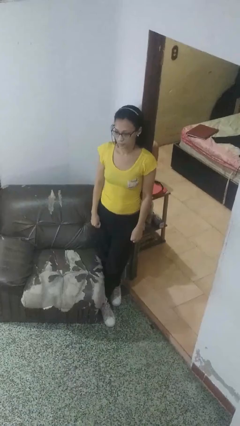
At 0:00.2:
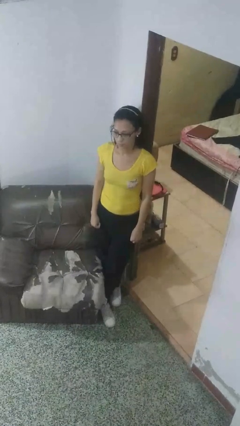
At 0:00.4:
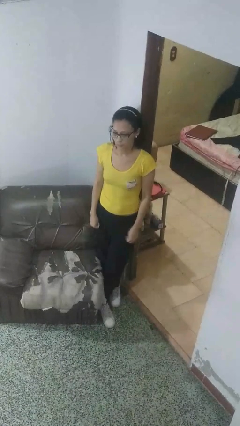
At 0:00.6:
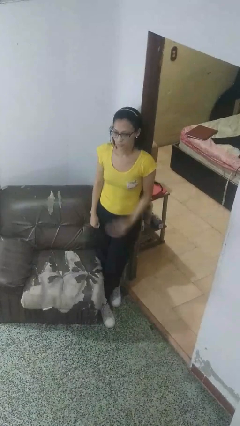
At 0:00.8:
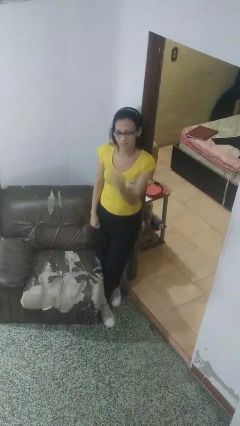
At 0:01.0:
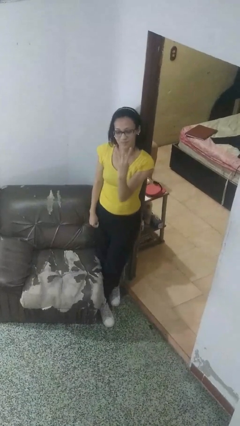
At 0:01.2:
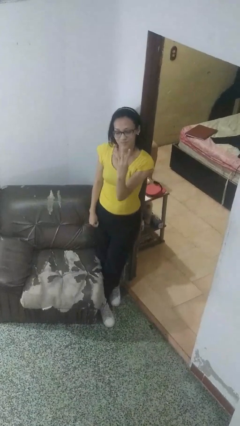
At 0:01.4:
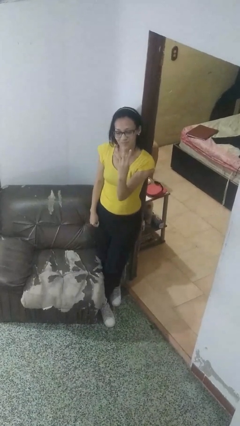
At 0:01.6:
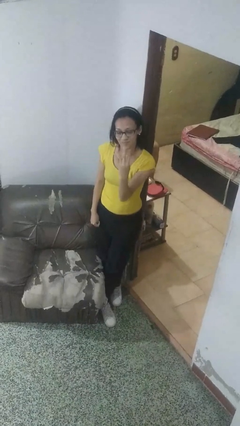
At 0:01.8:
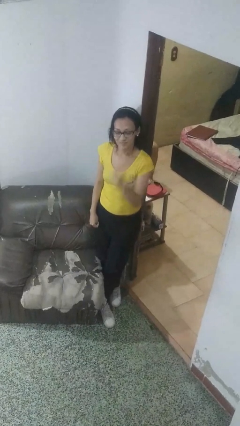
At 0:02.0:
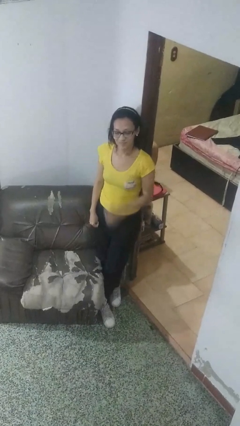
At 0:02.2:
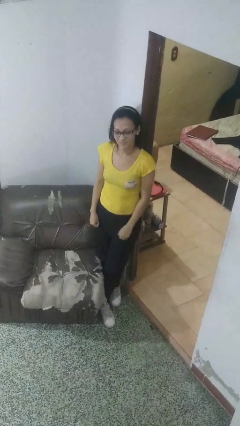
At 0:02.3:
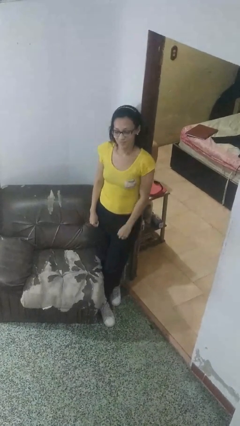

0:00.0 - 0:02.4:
person gestures number four

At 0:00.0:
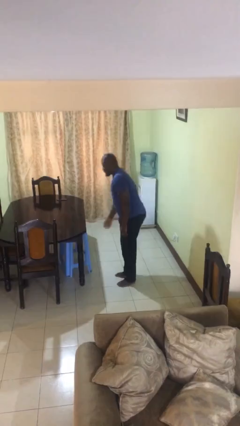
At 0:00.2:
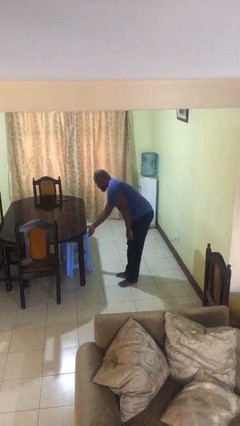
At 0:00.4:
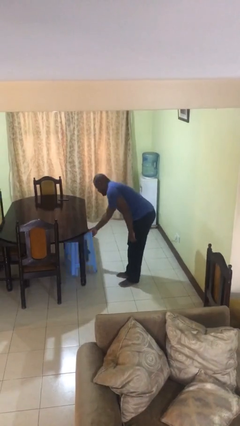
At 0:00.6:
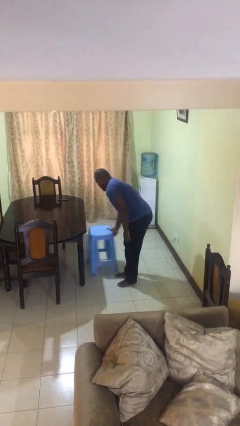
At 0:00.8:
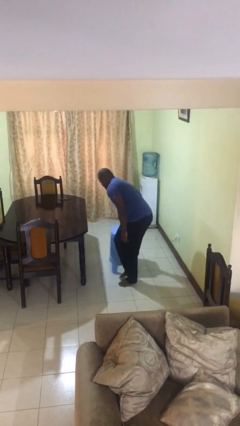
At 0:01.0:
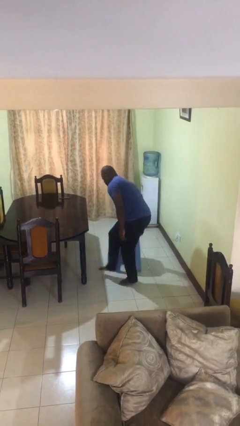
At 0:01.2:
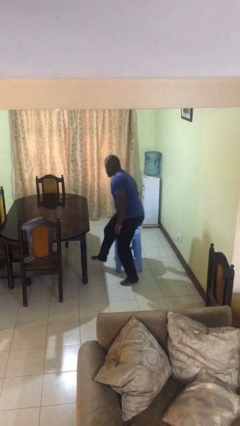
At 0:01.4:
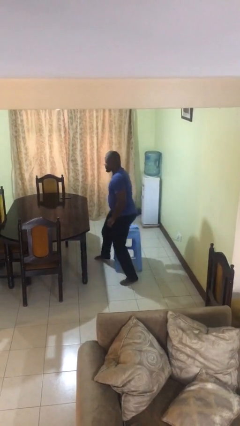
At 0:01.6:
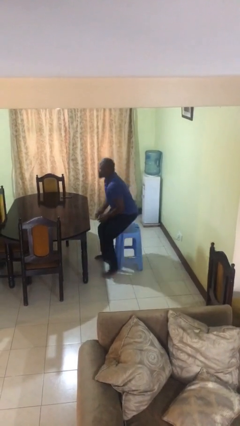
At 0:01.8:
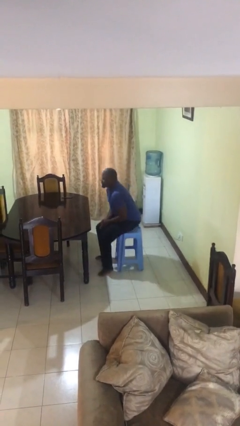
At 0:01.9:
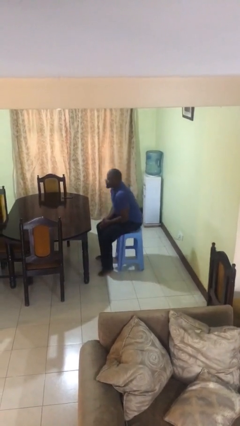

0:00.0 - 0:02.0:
person sits down

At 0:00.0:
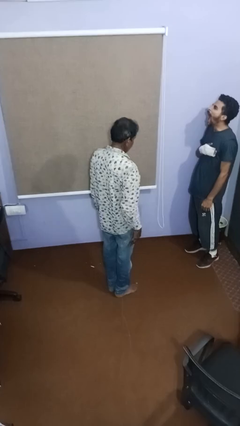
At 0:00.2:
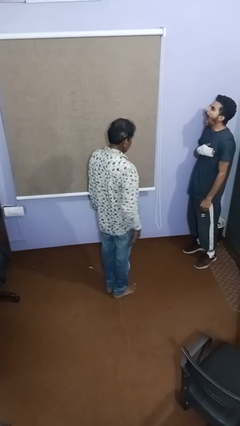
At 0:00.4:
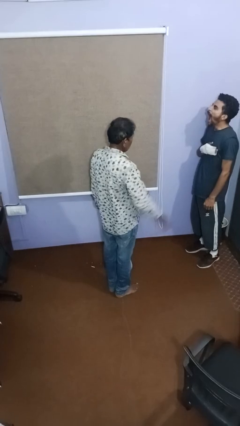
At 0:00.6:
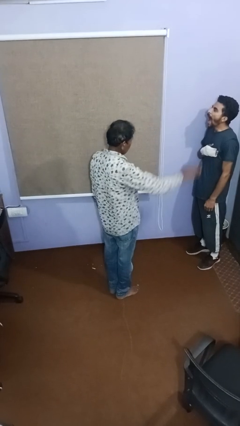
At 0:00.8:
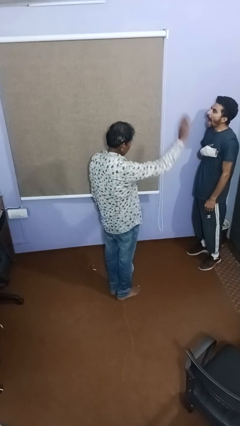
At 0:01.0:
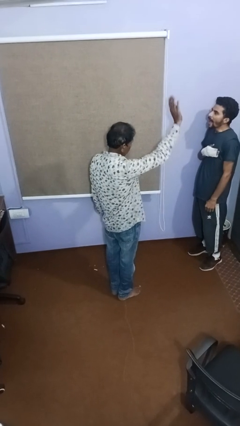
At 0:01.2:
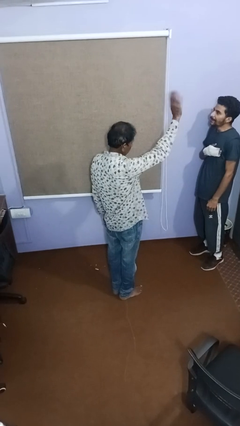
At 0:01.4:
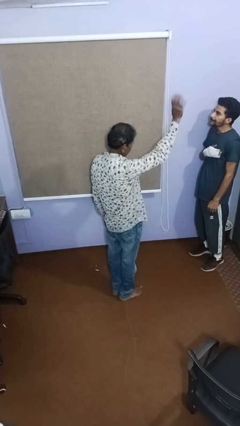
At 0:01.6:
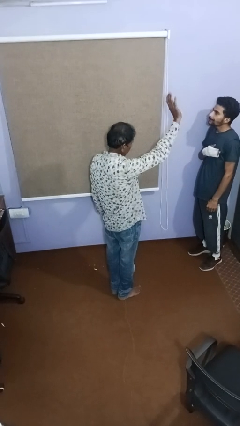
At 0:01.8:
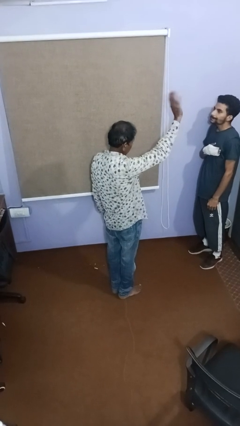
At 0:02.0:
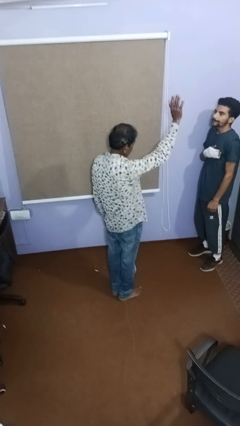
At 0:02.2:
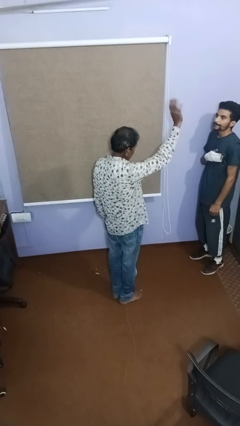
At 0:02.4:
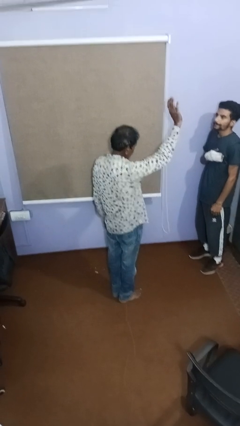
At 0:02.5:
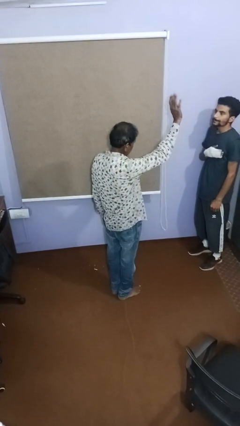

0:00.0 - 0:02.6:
person waves at person

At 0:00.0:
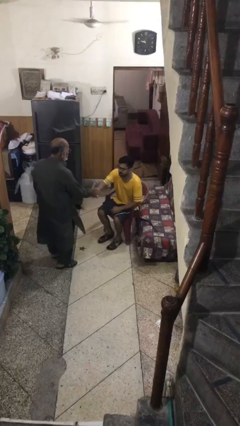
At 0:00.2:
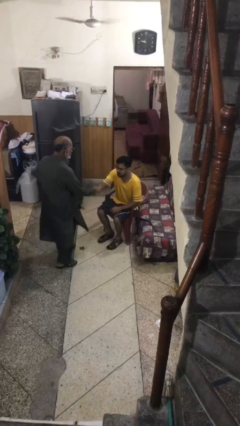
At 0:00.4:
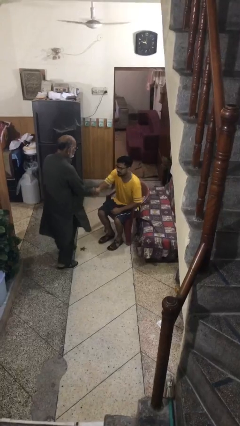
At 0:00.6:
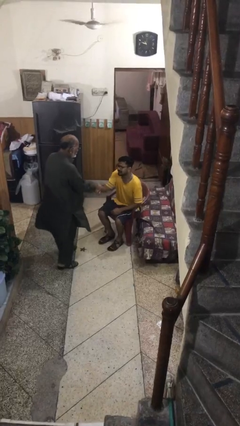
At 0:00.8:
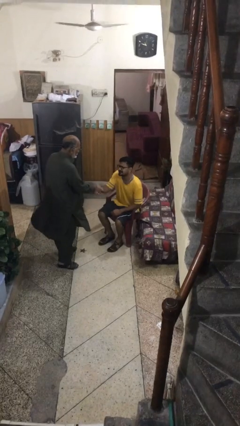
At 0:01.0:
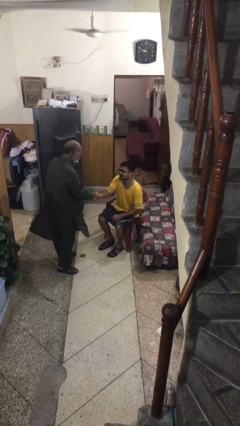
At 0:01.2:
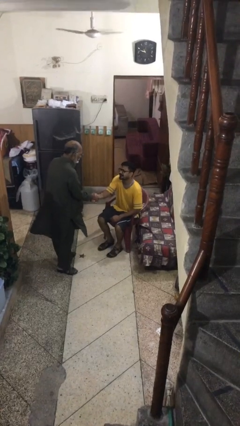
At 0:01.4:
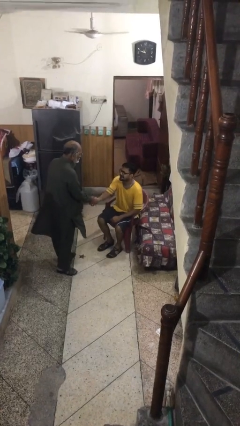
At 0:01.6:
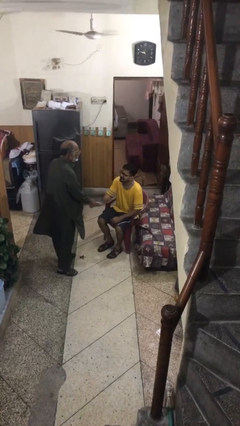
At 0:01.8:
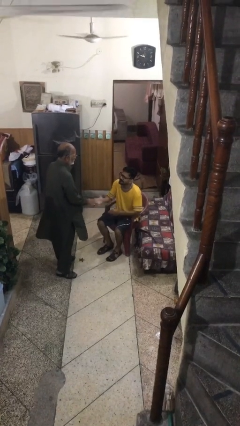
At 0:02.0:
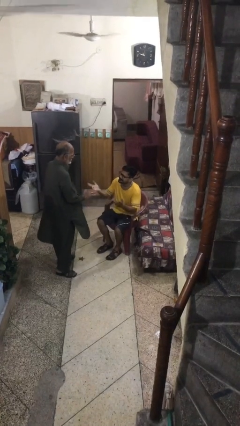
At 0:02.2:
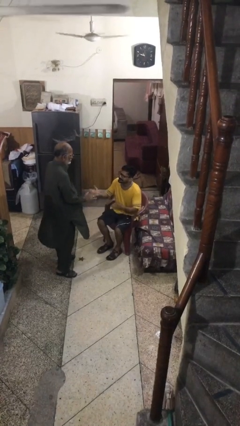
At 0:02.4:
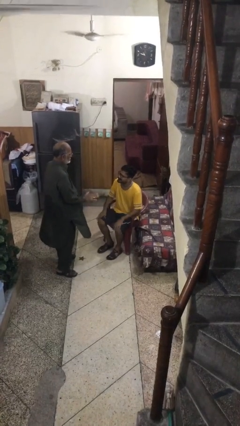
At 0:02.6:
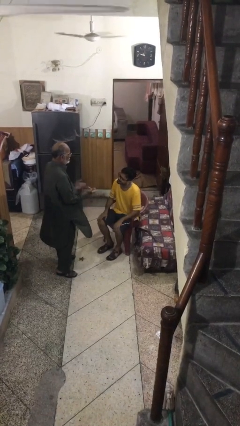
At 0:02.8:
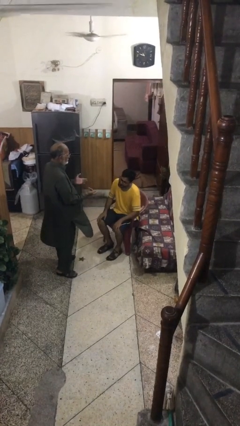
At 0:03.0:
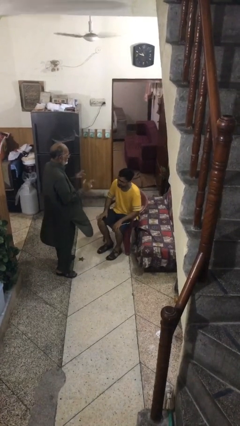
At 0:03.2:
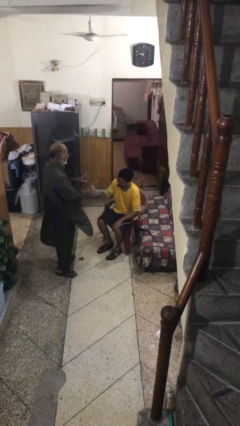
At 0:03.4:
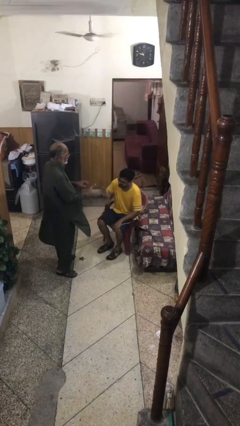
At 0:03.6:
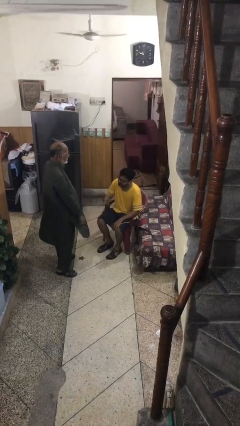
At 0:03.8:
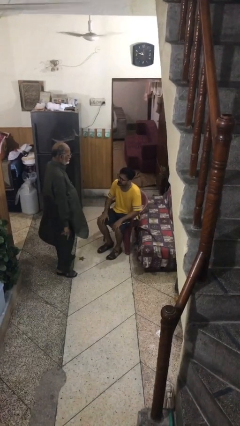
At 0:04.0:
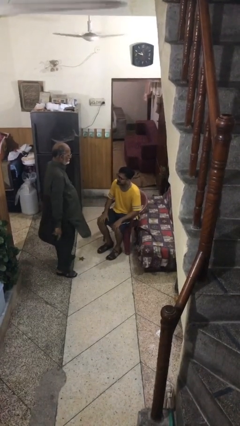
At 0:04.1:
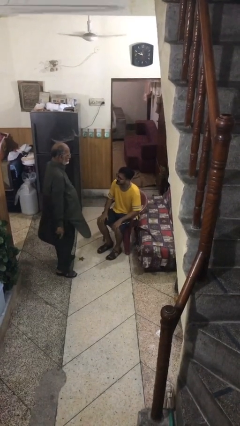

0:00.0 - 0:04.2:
person shakes hand

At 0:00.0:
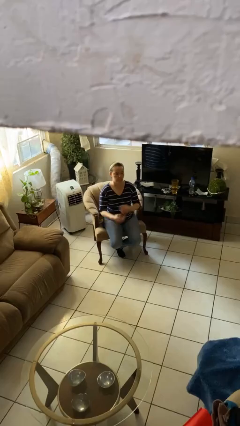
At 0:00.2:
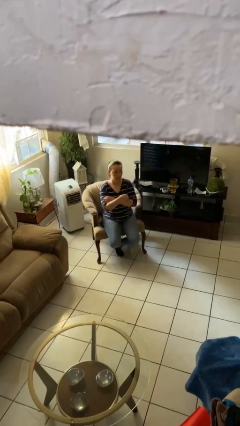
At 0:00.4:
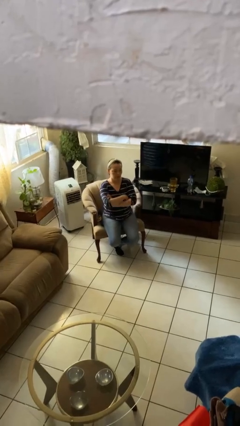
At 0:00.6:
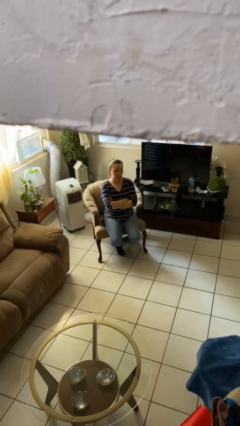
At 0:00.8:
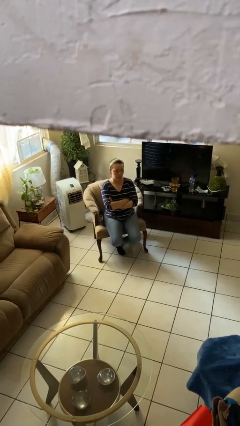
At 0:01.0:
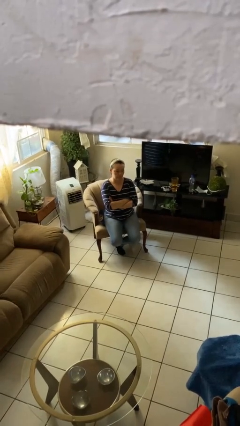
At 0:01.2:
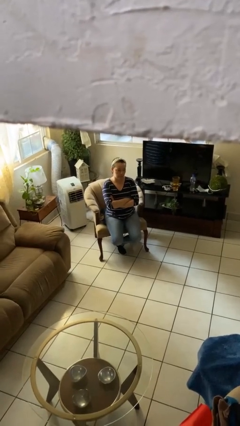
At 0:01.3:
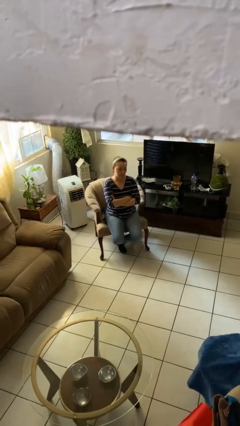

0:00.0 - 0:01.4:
person crosses arms

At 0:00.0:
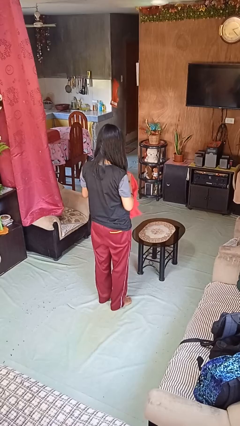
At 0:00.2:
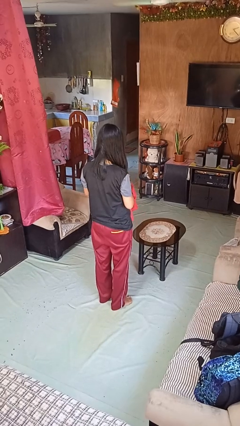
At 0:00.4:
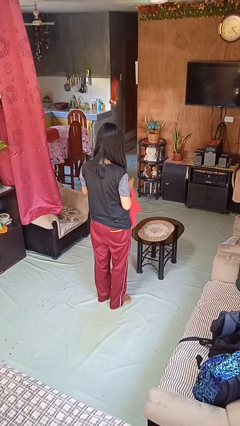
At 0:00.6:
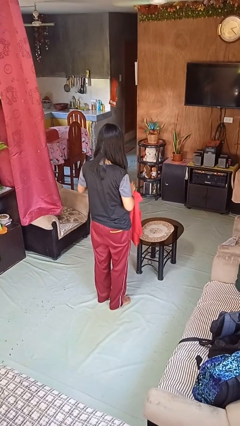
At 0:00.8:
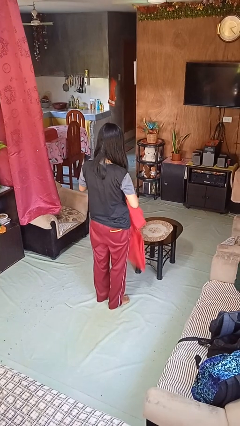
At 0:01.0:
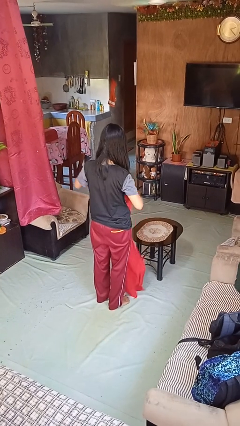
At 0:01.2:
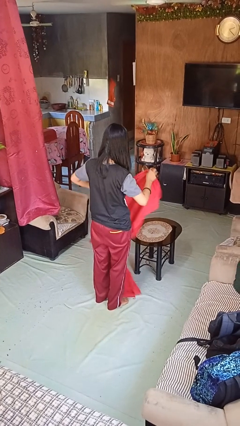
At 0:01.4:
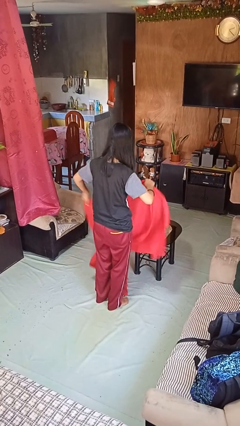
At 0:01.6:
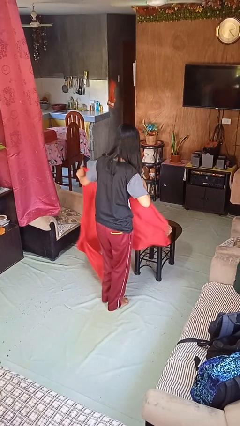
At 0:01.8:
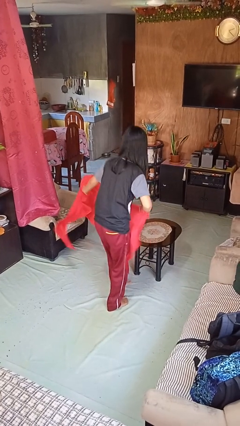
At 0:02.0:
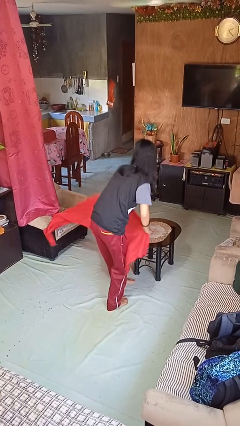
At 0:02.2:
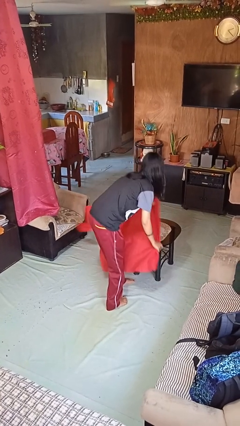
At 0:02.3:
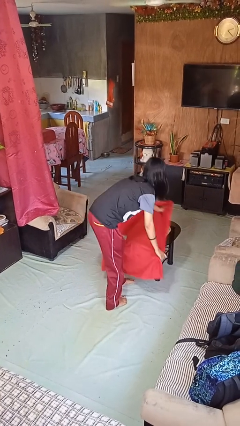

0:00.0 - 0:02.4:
person spreads tablecloth

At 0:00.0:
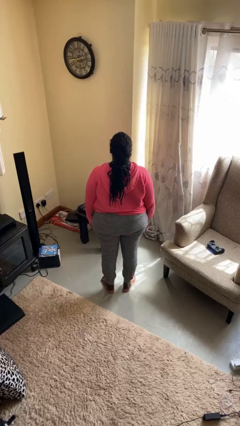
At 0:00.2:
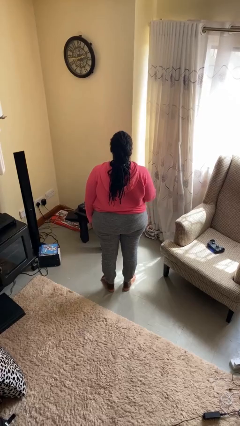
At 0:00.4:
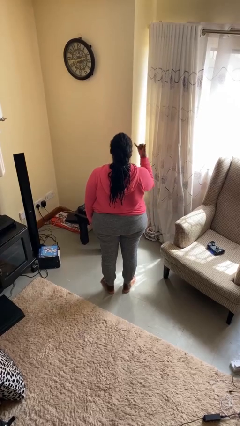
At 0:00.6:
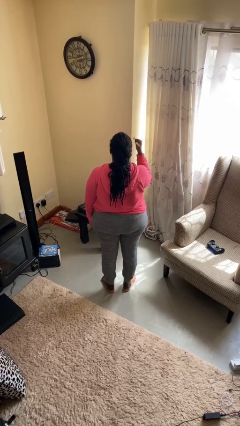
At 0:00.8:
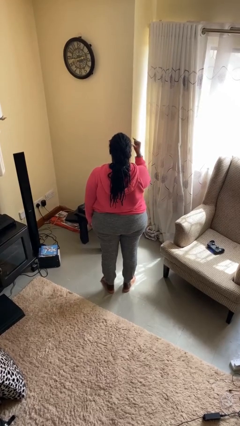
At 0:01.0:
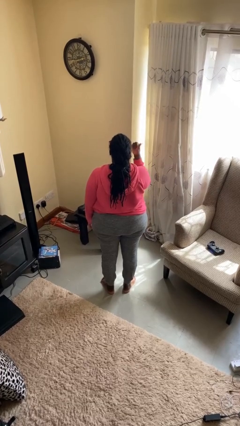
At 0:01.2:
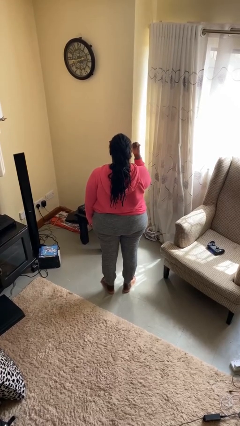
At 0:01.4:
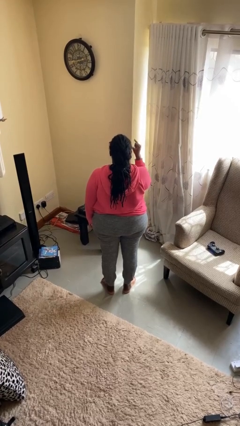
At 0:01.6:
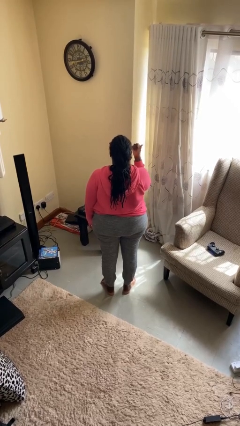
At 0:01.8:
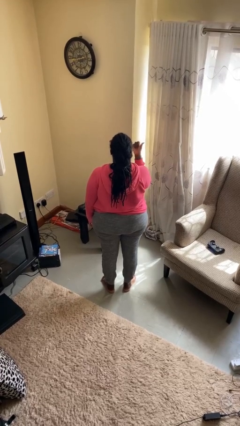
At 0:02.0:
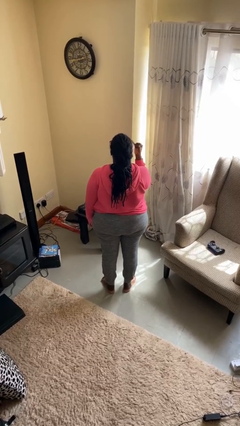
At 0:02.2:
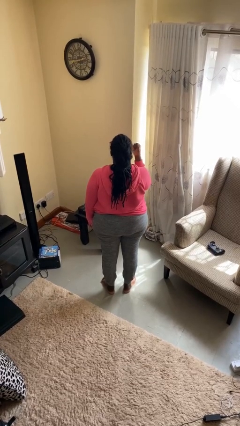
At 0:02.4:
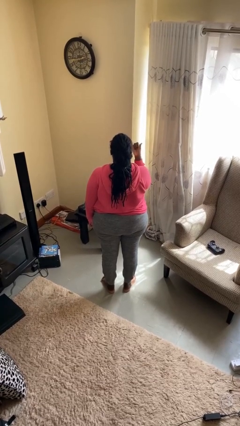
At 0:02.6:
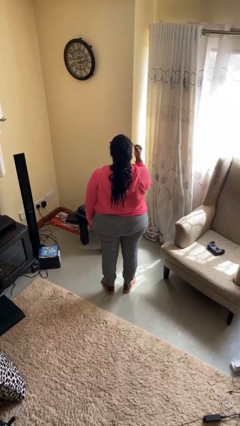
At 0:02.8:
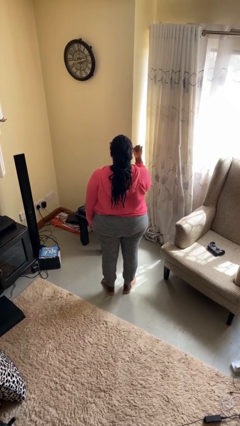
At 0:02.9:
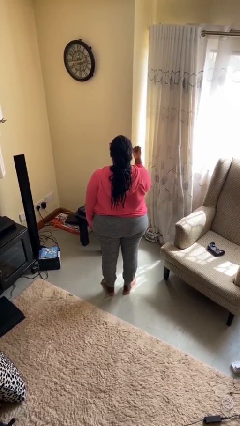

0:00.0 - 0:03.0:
person gestures hang loose
